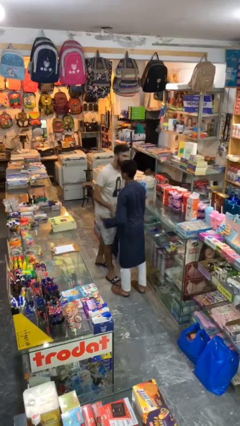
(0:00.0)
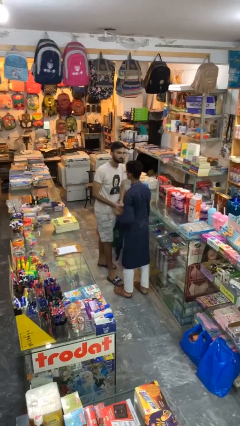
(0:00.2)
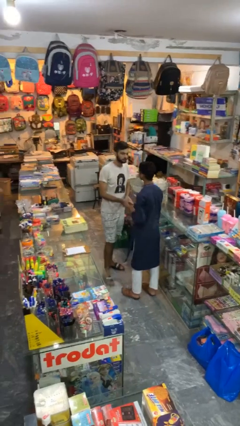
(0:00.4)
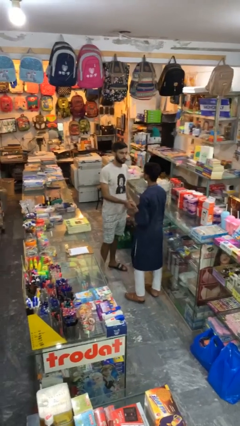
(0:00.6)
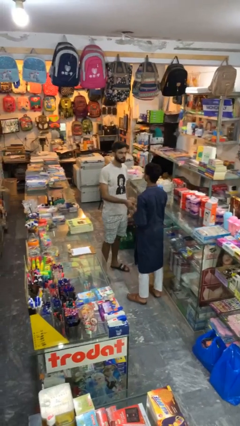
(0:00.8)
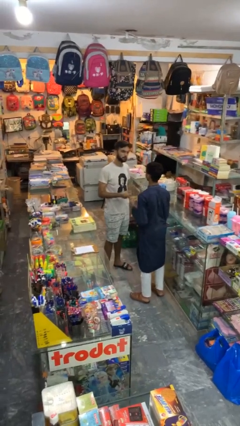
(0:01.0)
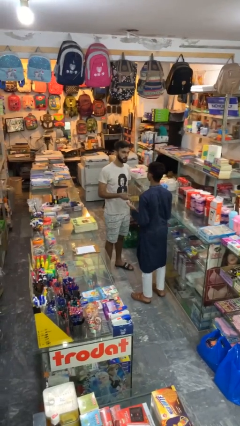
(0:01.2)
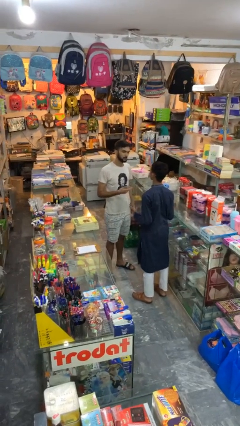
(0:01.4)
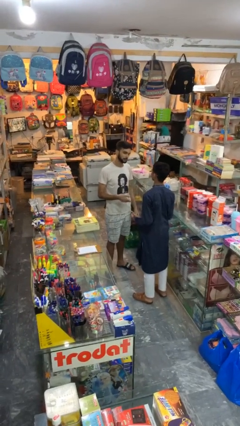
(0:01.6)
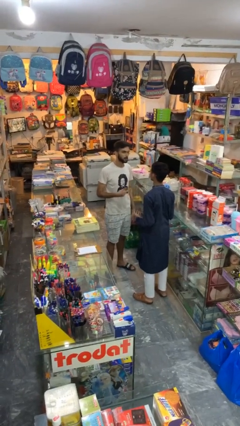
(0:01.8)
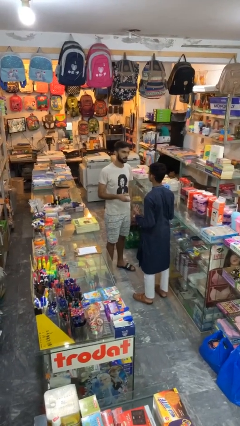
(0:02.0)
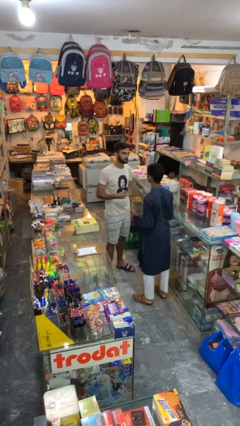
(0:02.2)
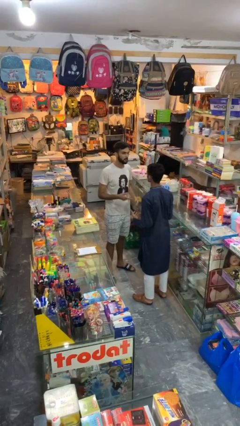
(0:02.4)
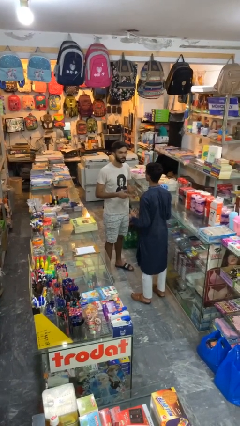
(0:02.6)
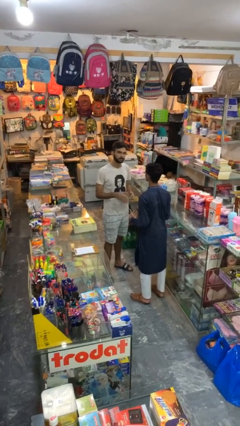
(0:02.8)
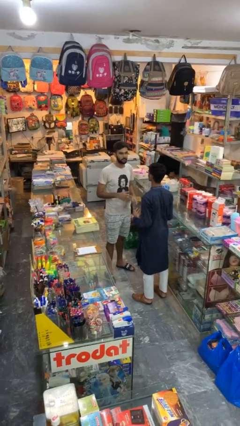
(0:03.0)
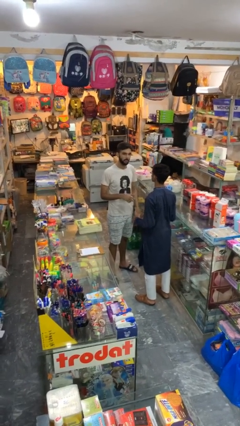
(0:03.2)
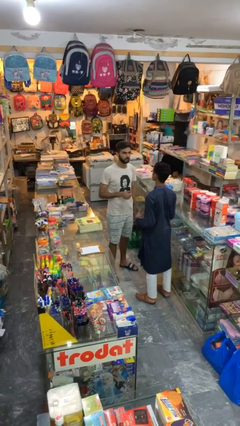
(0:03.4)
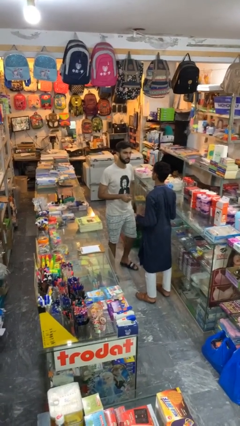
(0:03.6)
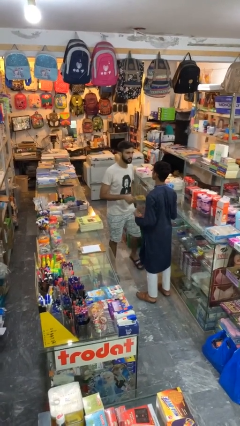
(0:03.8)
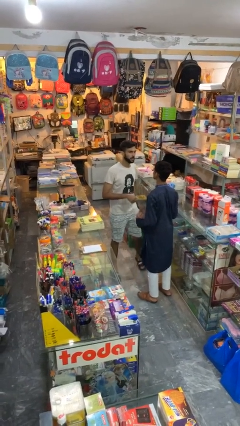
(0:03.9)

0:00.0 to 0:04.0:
person talks to person

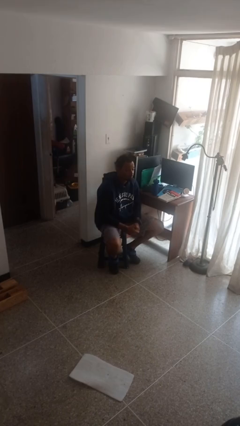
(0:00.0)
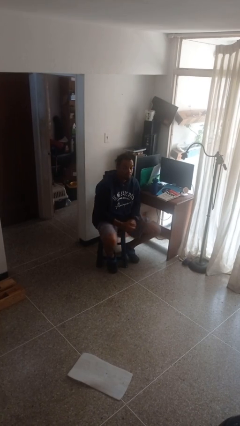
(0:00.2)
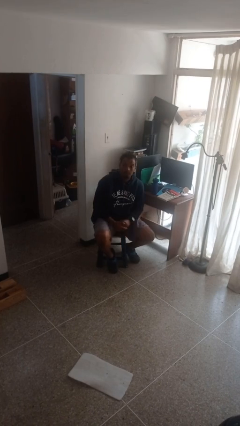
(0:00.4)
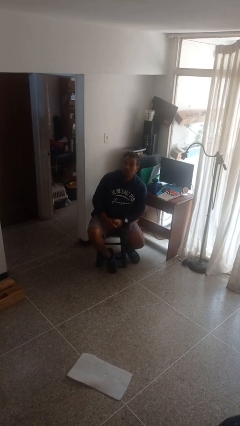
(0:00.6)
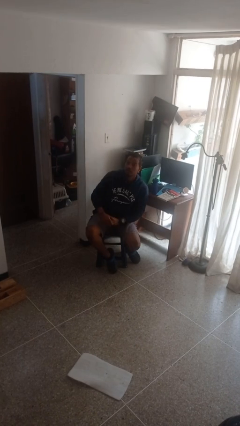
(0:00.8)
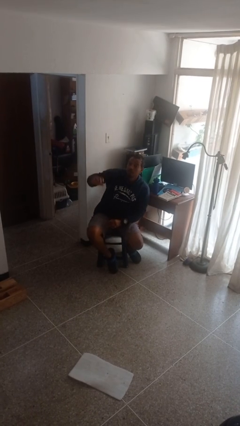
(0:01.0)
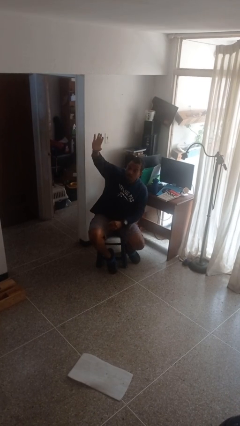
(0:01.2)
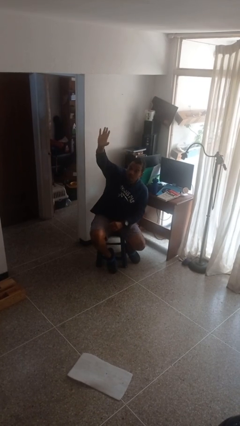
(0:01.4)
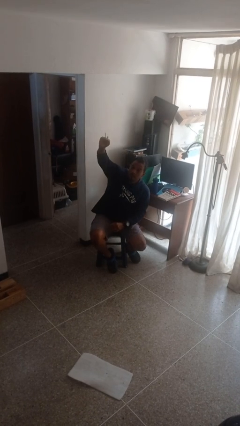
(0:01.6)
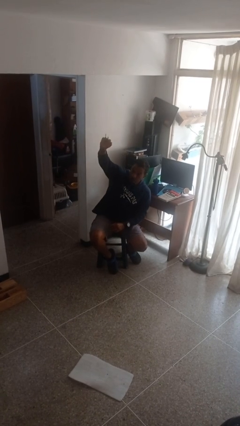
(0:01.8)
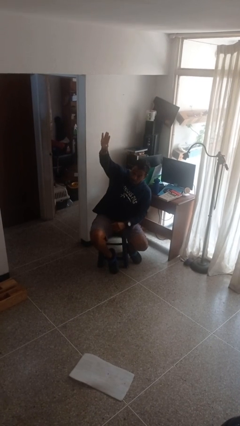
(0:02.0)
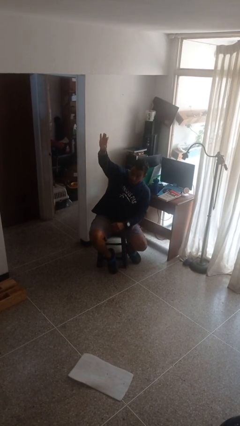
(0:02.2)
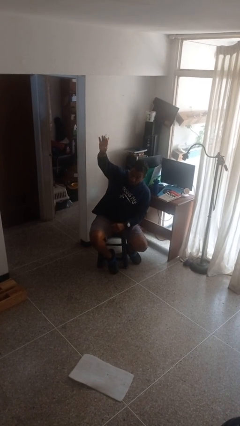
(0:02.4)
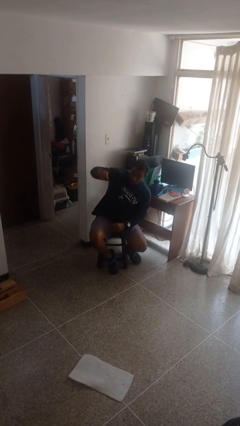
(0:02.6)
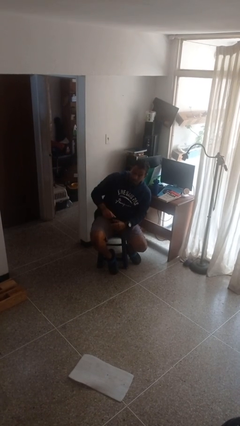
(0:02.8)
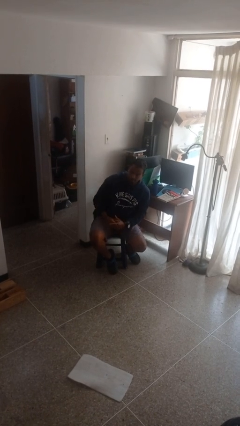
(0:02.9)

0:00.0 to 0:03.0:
person gestures raise hand

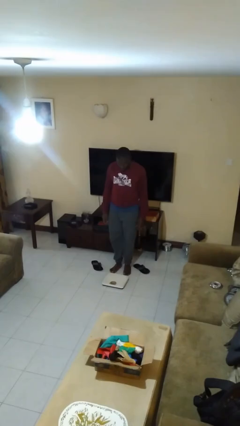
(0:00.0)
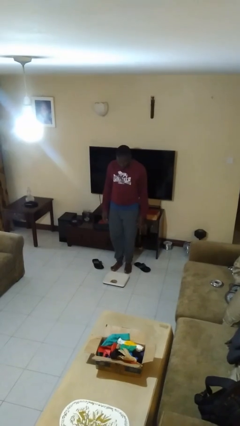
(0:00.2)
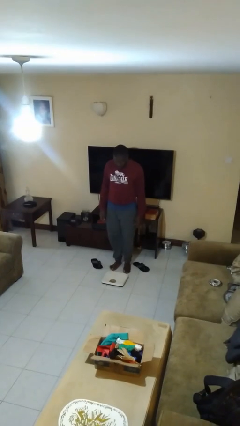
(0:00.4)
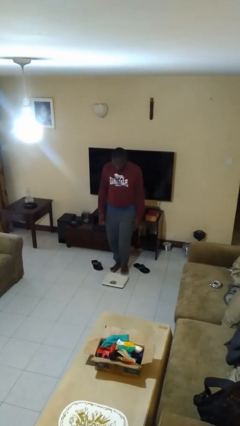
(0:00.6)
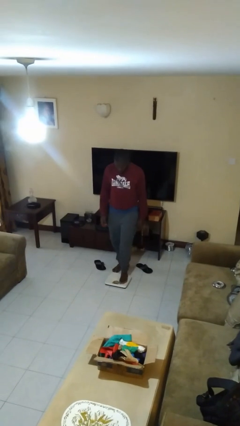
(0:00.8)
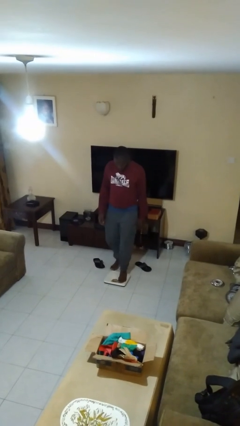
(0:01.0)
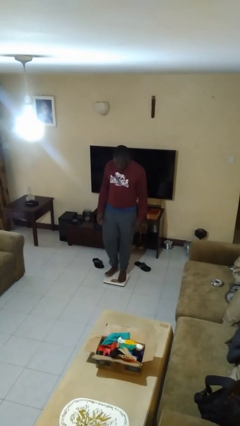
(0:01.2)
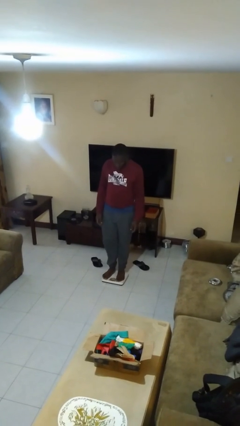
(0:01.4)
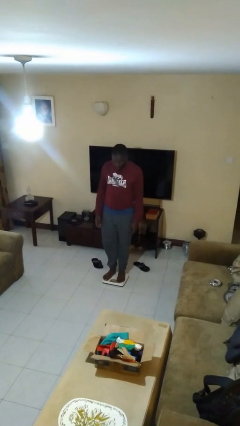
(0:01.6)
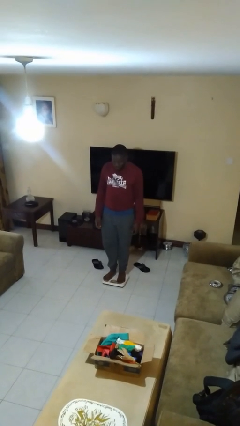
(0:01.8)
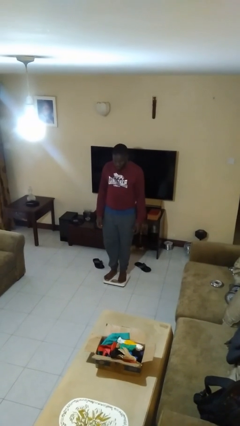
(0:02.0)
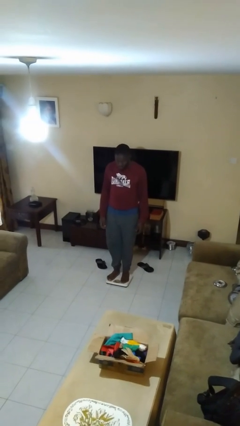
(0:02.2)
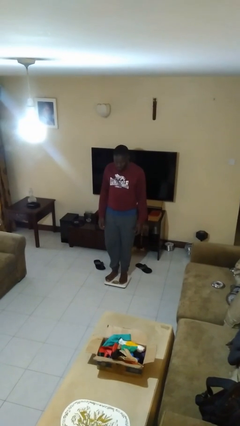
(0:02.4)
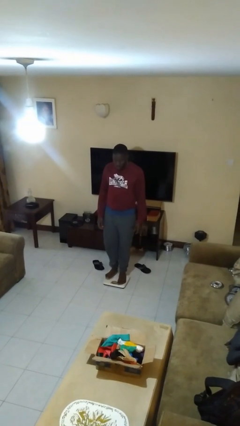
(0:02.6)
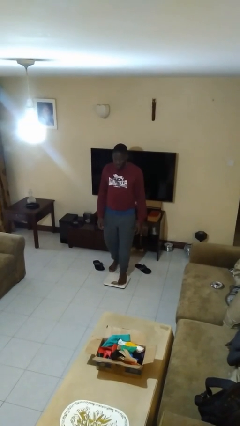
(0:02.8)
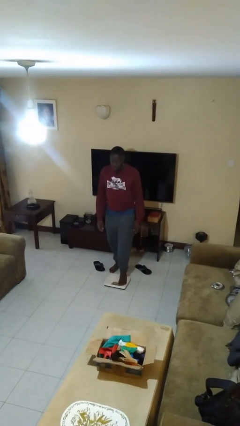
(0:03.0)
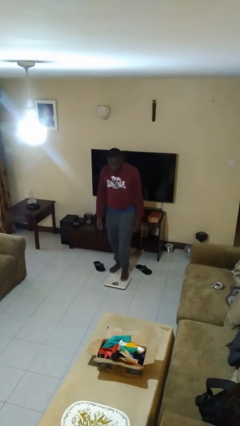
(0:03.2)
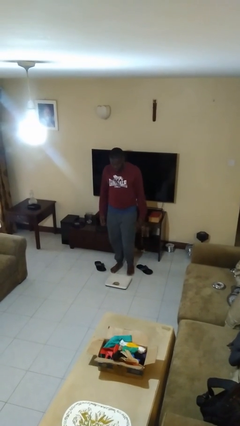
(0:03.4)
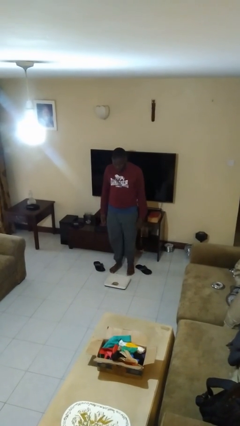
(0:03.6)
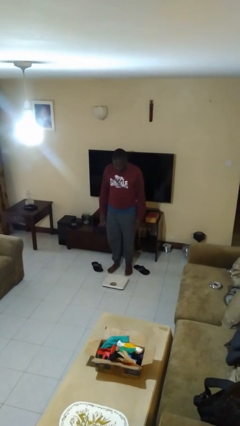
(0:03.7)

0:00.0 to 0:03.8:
person uses bodyweight scale

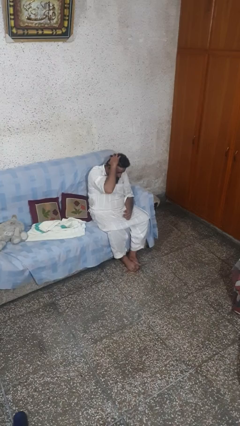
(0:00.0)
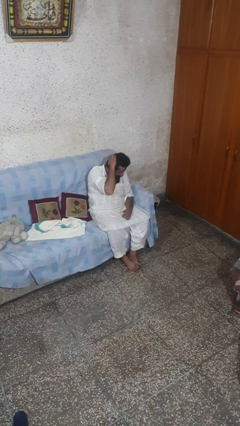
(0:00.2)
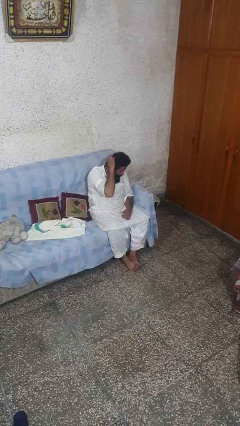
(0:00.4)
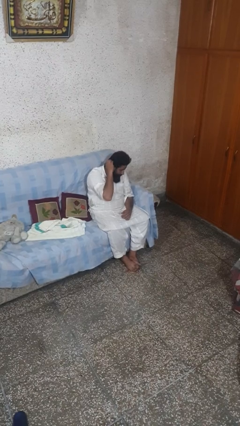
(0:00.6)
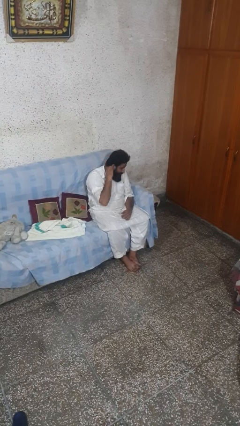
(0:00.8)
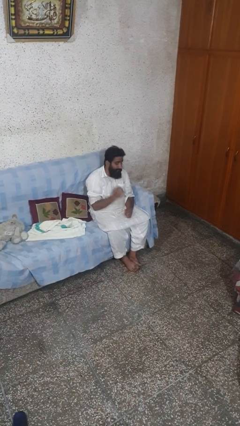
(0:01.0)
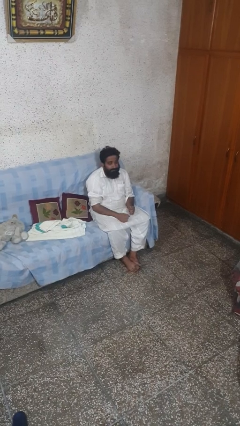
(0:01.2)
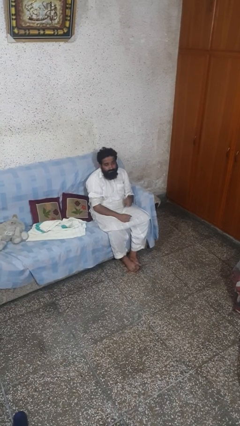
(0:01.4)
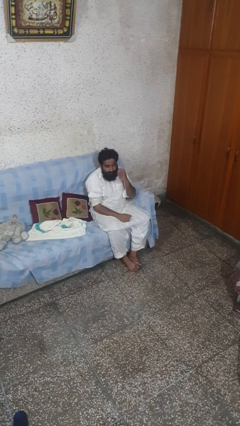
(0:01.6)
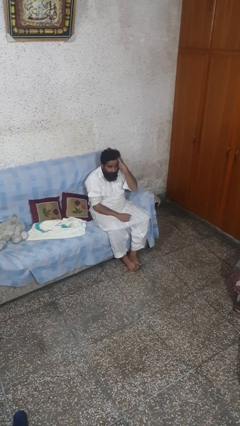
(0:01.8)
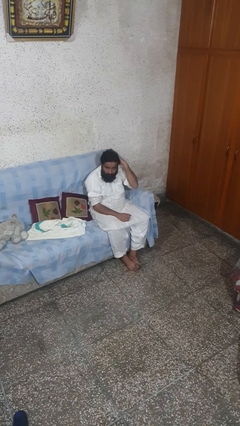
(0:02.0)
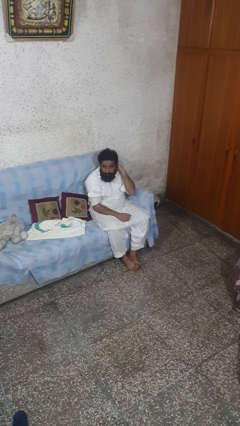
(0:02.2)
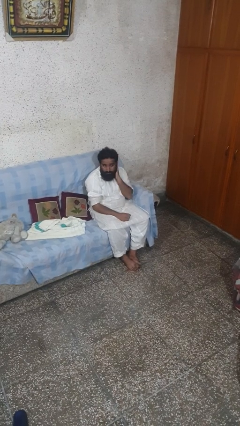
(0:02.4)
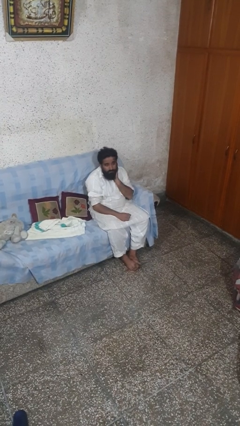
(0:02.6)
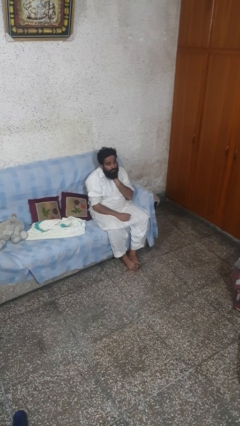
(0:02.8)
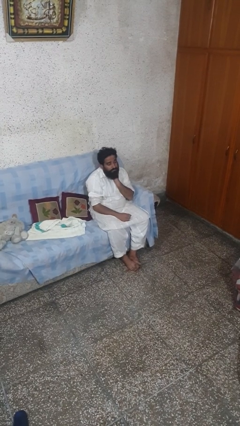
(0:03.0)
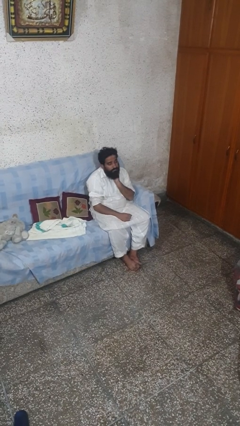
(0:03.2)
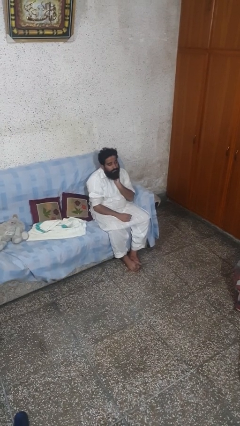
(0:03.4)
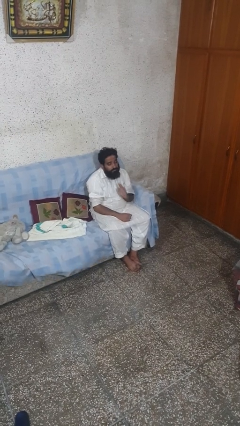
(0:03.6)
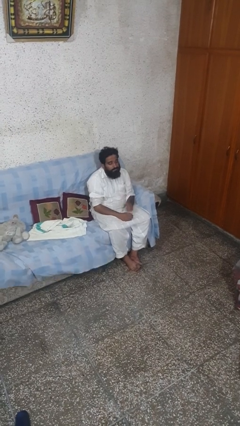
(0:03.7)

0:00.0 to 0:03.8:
person strokes hair

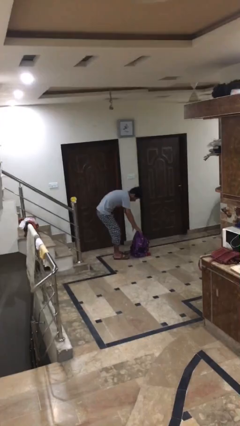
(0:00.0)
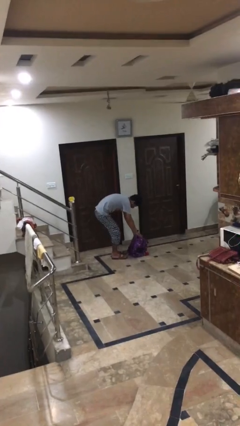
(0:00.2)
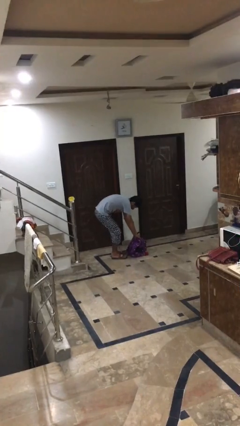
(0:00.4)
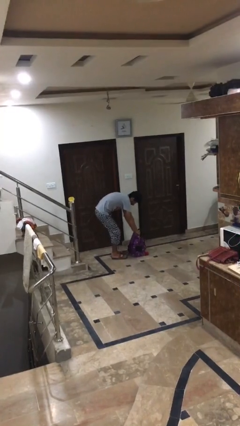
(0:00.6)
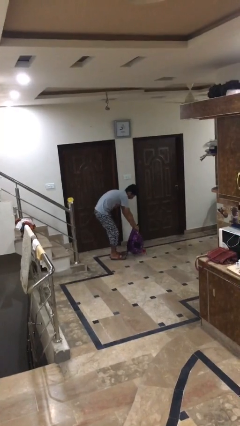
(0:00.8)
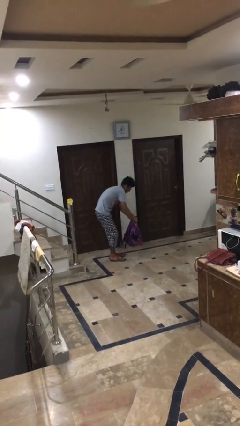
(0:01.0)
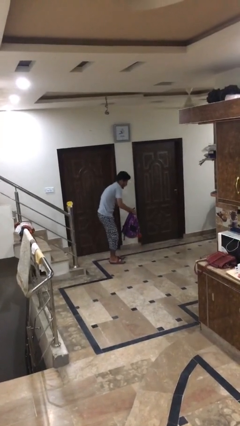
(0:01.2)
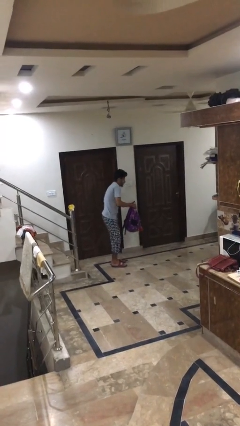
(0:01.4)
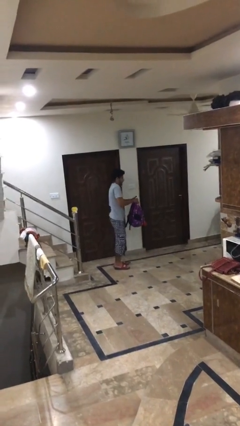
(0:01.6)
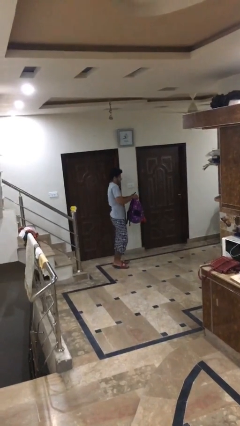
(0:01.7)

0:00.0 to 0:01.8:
person picks up object from floor

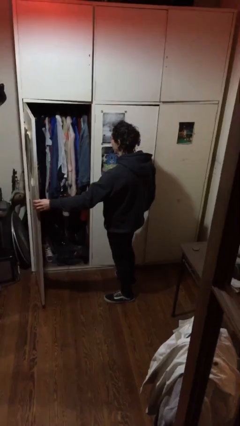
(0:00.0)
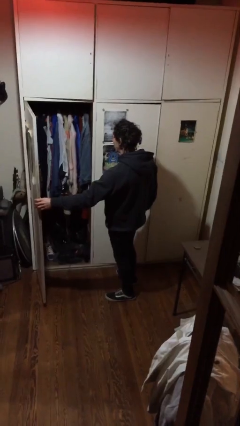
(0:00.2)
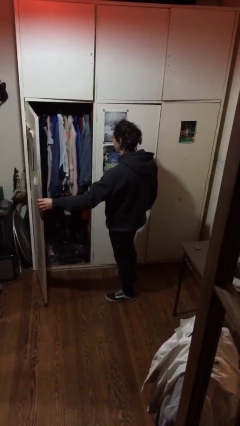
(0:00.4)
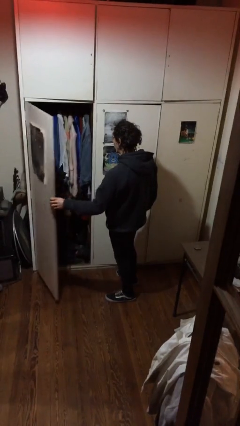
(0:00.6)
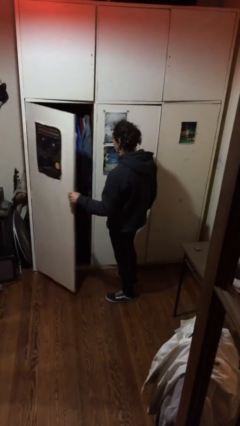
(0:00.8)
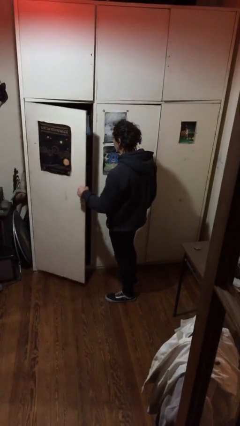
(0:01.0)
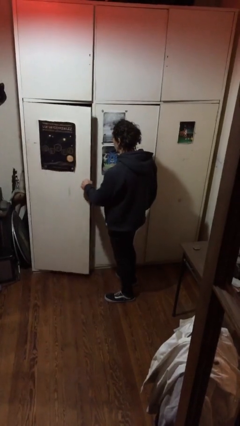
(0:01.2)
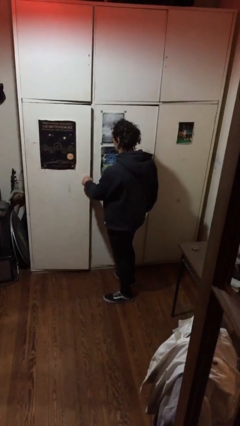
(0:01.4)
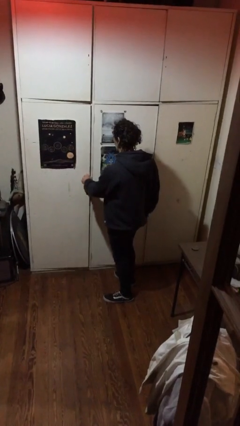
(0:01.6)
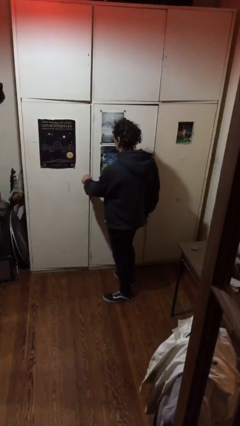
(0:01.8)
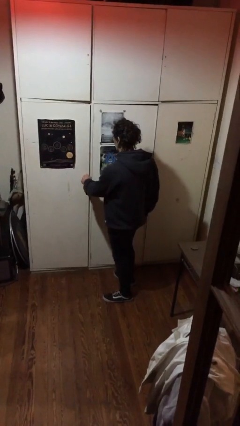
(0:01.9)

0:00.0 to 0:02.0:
person closes closet door
